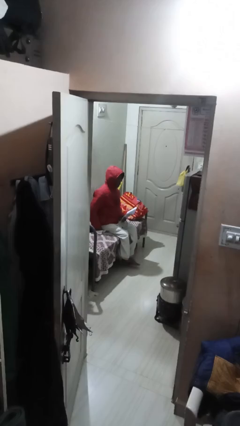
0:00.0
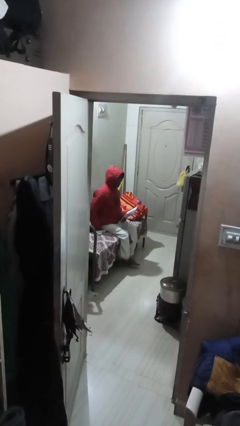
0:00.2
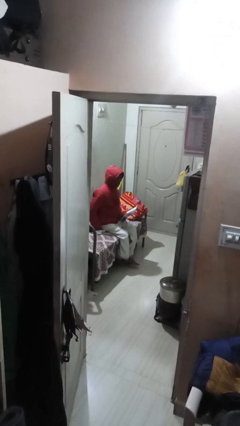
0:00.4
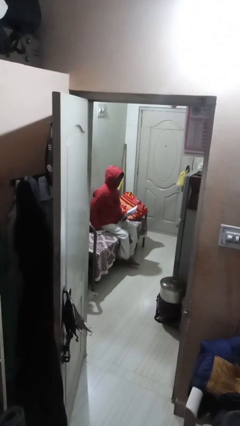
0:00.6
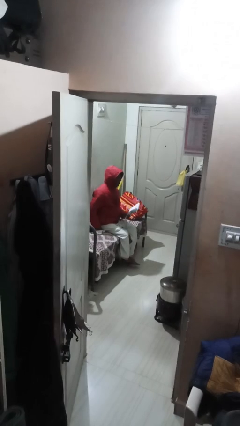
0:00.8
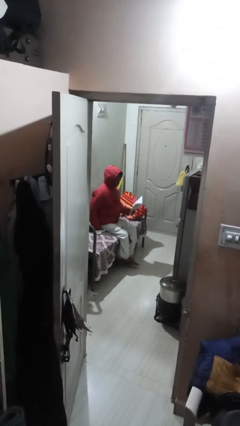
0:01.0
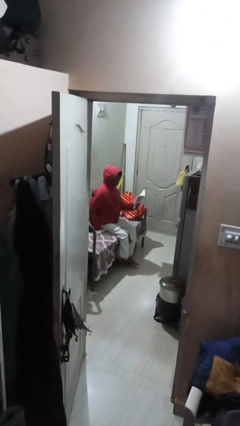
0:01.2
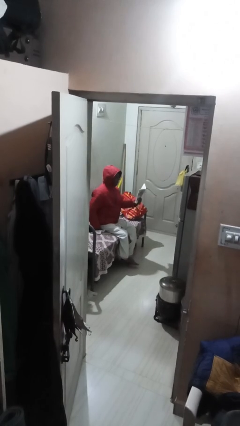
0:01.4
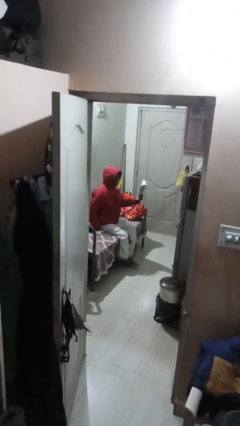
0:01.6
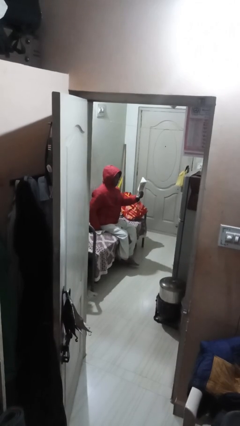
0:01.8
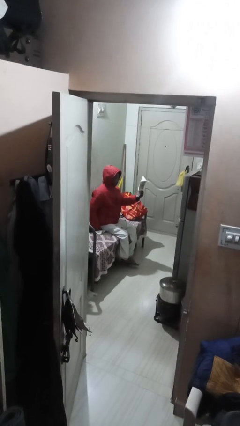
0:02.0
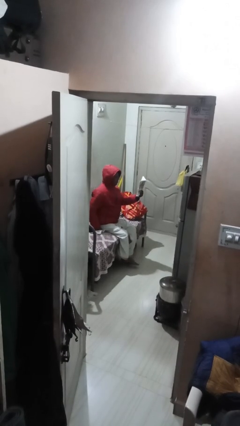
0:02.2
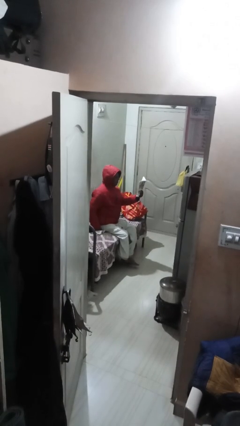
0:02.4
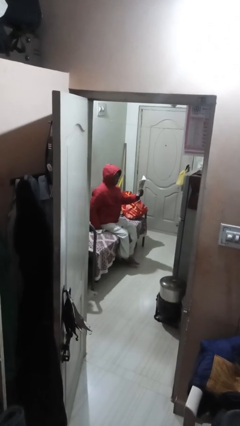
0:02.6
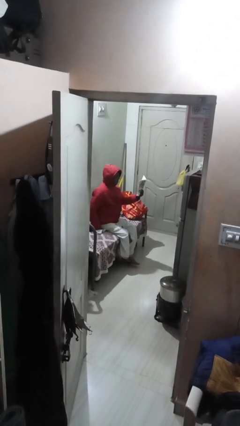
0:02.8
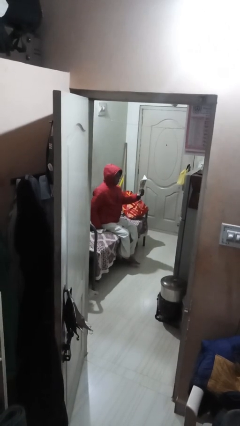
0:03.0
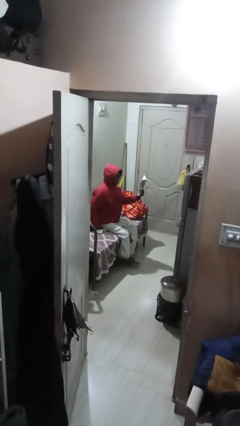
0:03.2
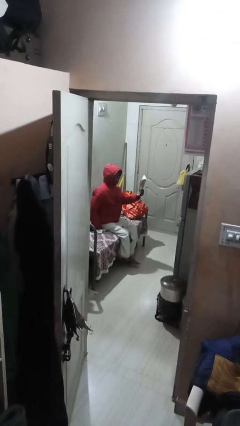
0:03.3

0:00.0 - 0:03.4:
person reads document

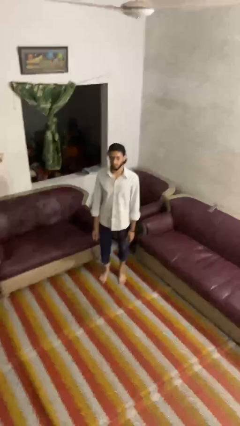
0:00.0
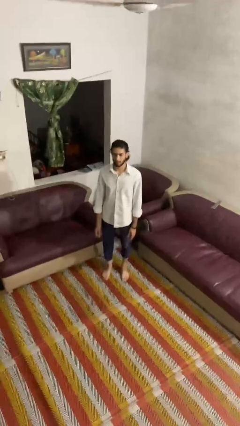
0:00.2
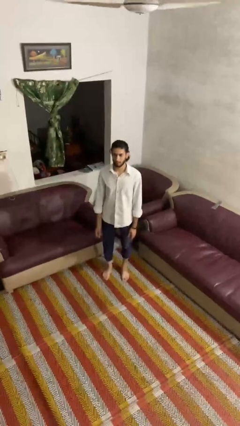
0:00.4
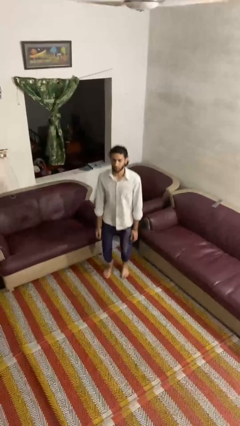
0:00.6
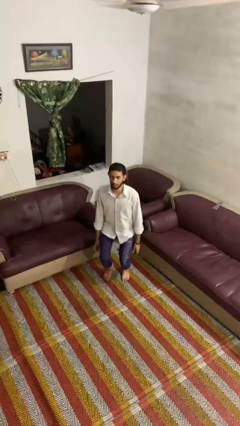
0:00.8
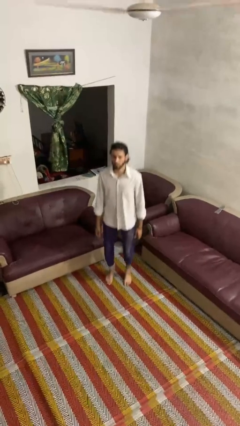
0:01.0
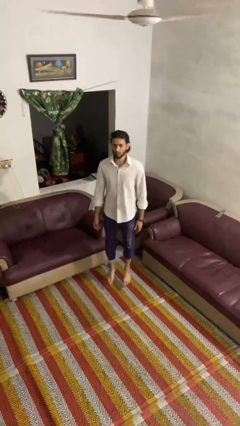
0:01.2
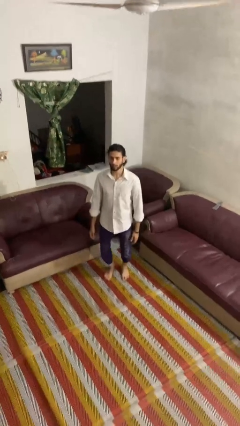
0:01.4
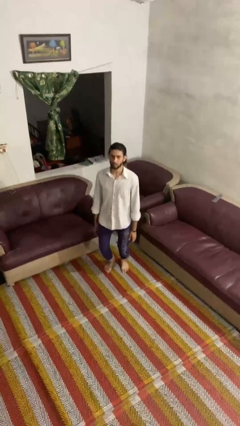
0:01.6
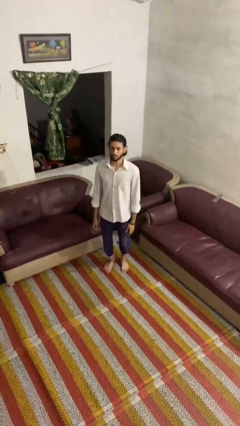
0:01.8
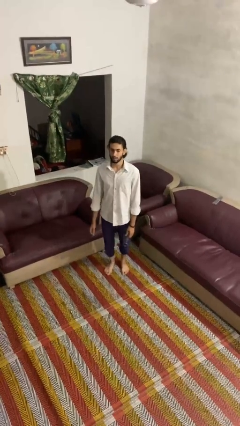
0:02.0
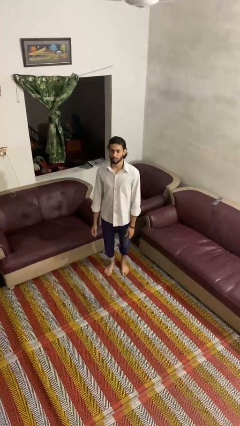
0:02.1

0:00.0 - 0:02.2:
person jumps

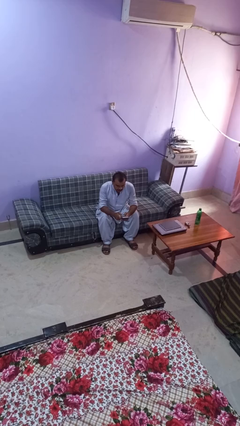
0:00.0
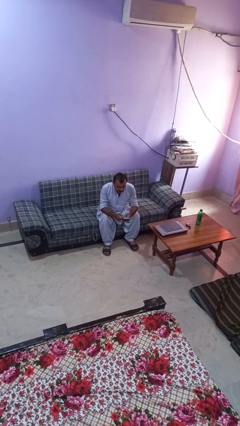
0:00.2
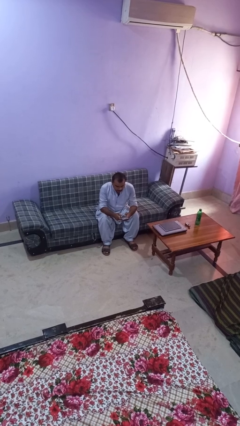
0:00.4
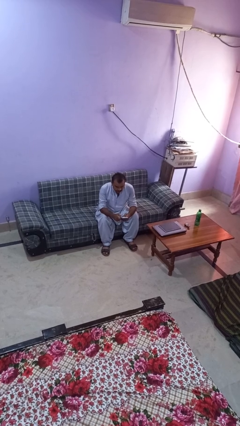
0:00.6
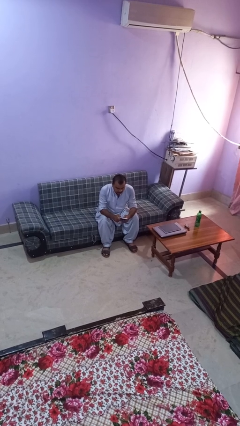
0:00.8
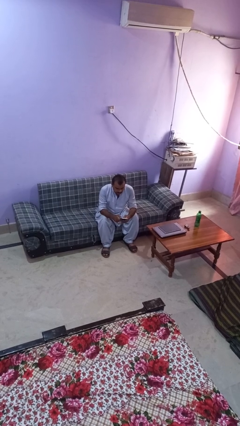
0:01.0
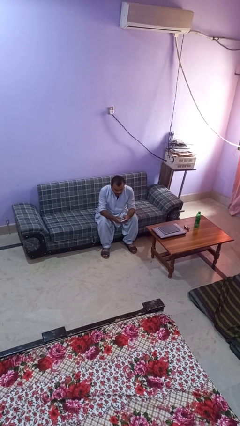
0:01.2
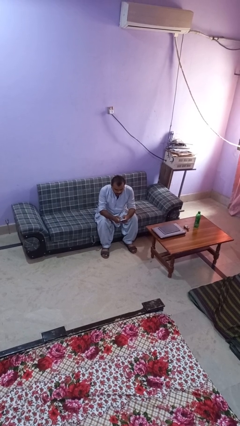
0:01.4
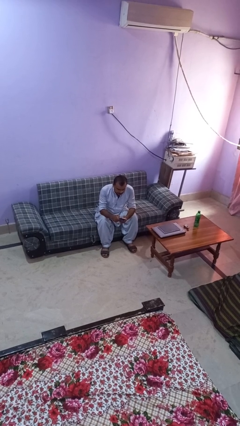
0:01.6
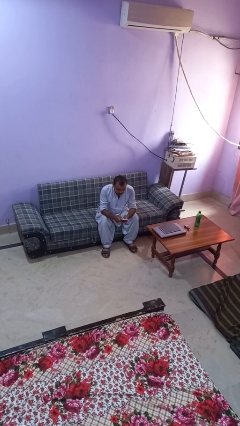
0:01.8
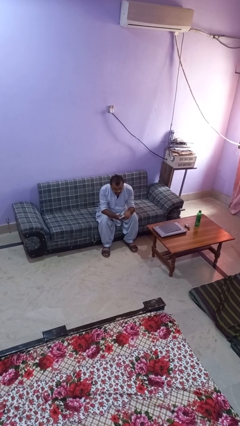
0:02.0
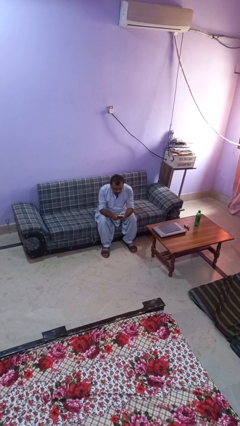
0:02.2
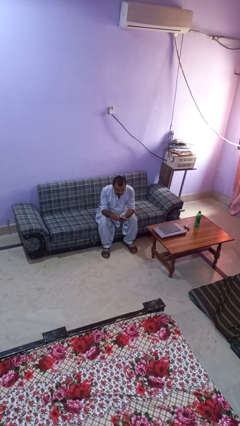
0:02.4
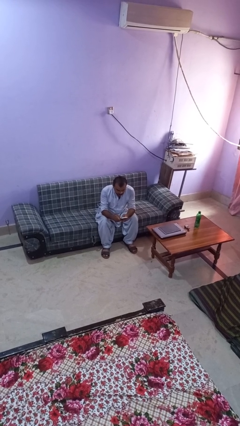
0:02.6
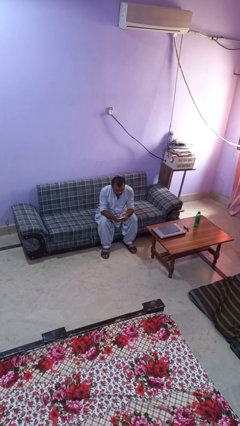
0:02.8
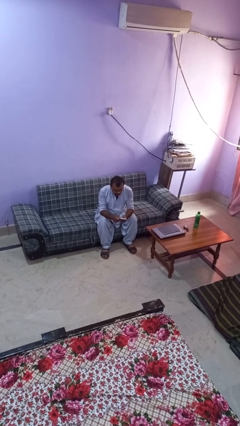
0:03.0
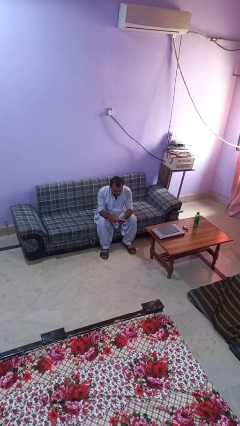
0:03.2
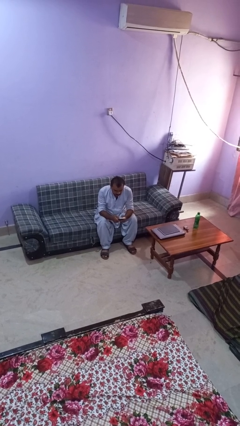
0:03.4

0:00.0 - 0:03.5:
person interacts with handheld game

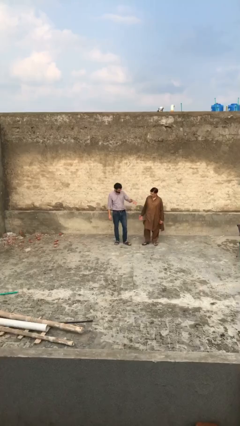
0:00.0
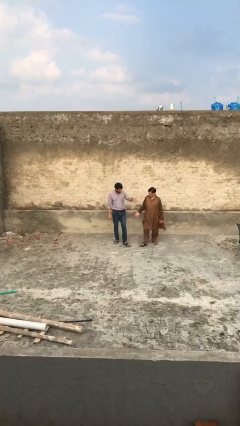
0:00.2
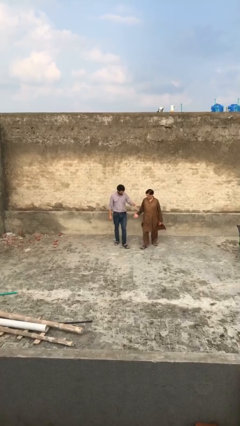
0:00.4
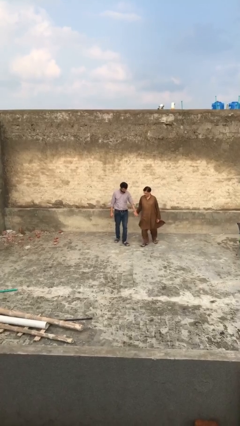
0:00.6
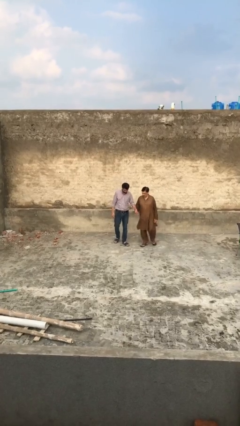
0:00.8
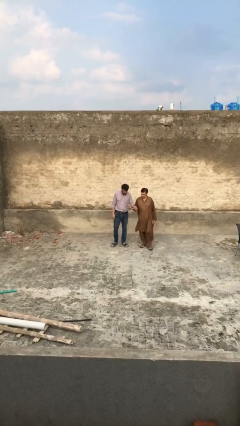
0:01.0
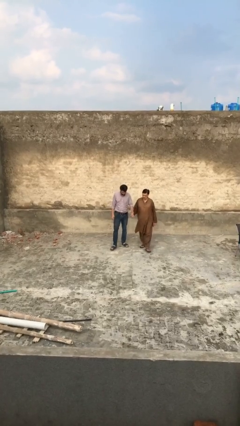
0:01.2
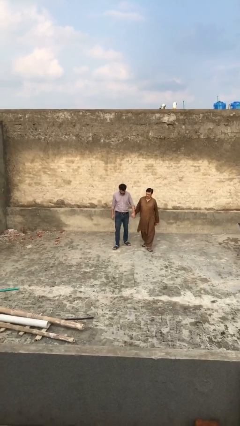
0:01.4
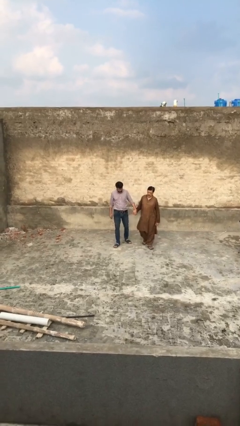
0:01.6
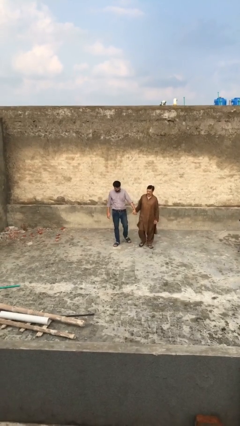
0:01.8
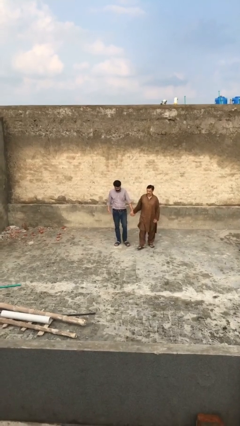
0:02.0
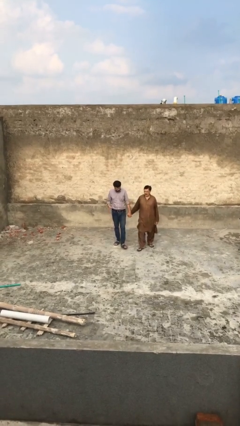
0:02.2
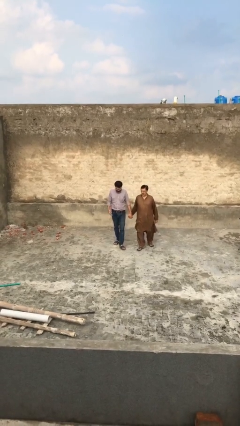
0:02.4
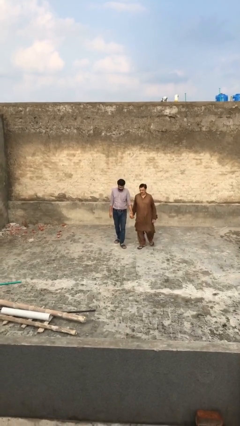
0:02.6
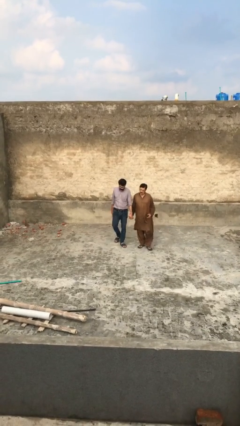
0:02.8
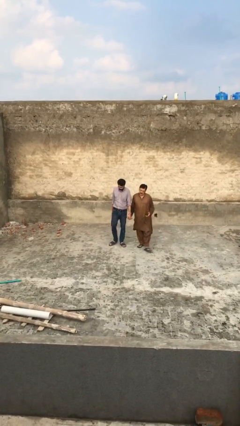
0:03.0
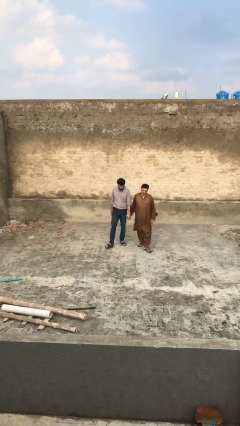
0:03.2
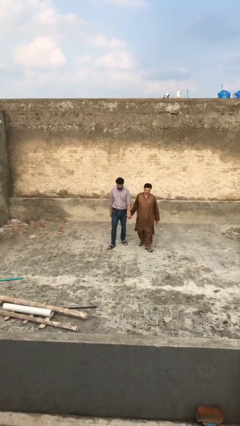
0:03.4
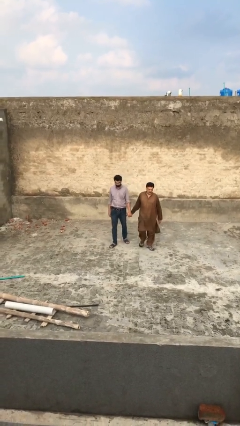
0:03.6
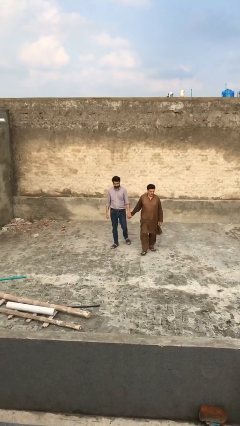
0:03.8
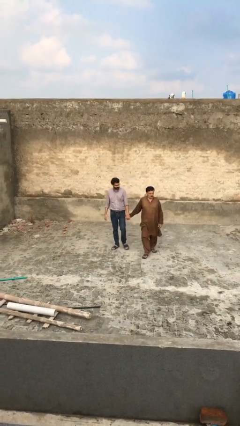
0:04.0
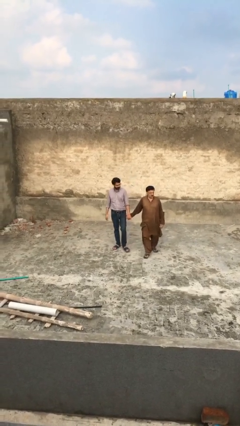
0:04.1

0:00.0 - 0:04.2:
person holds hand

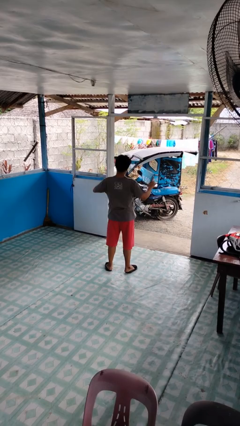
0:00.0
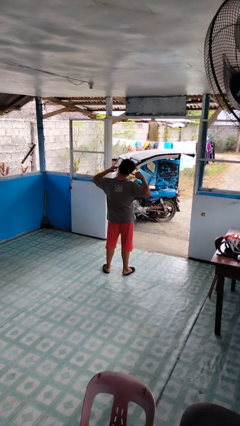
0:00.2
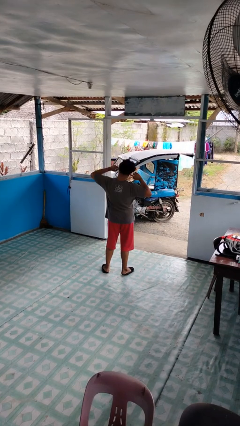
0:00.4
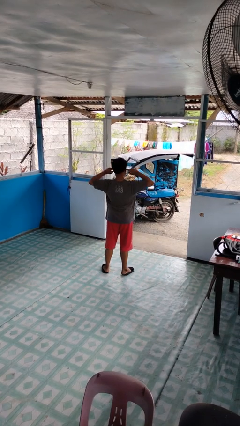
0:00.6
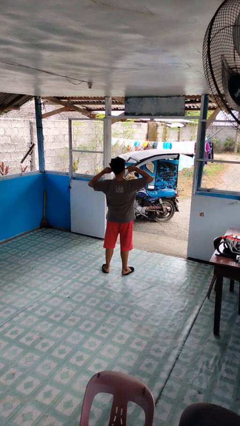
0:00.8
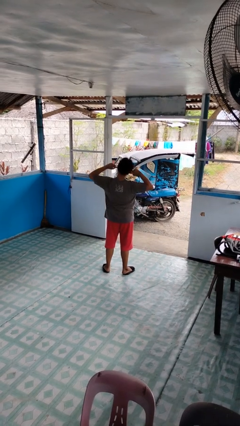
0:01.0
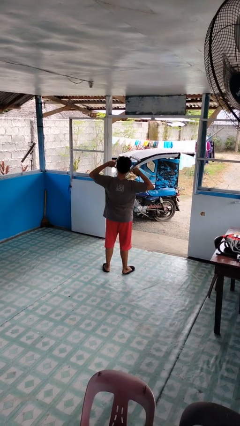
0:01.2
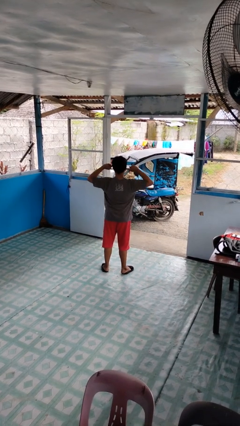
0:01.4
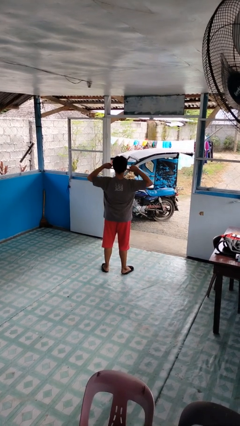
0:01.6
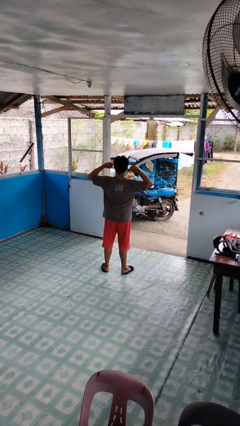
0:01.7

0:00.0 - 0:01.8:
person puts fingers in ear

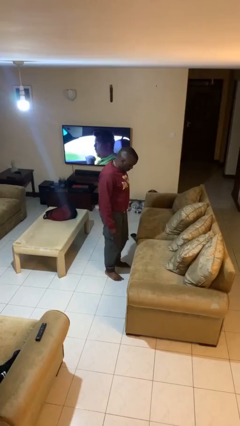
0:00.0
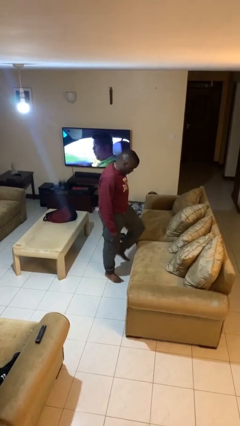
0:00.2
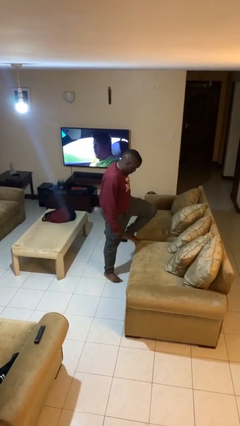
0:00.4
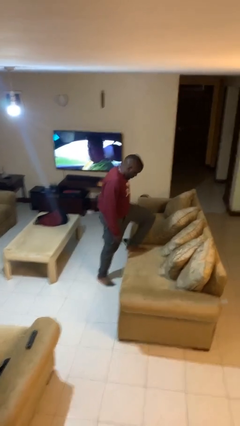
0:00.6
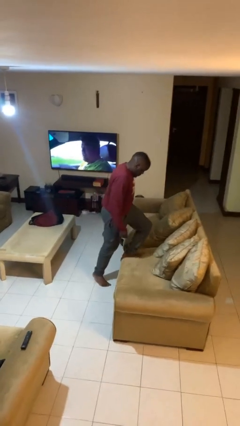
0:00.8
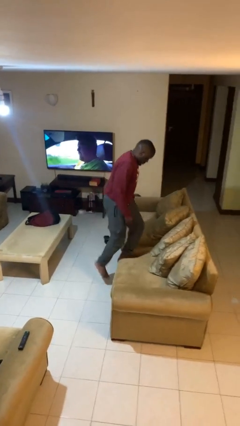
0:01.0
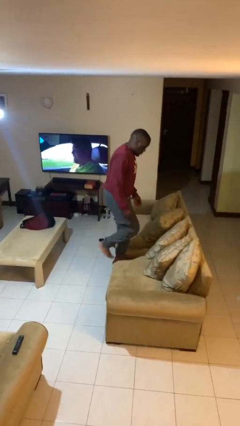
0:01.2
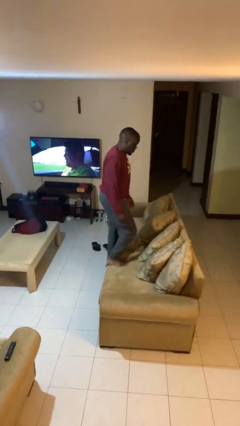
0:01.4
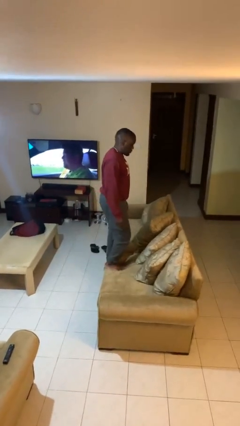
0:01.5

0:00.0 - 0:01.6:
person climbs off couch

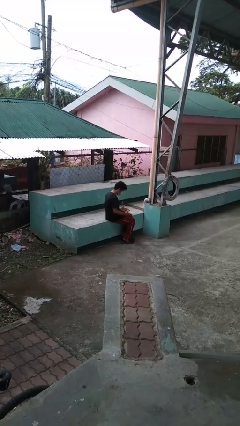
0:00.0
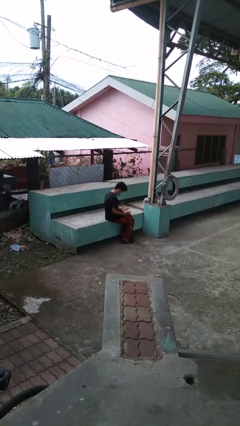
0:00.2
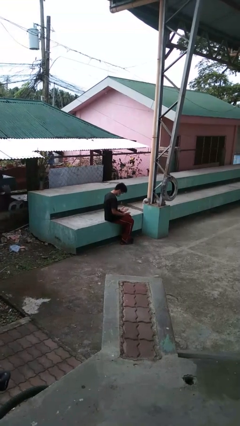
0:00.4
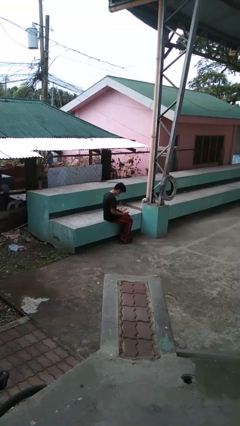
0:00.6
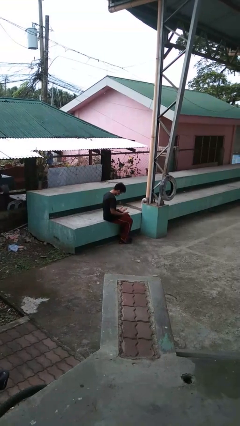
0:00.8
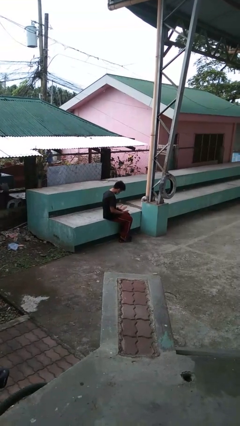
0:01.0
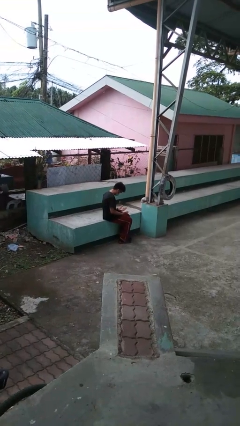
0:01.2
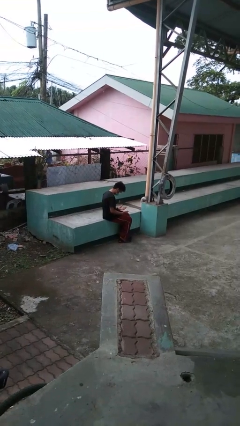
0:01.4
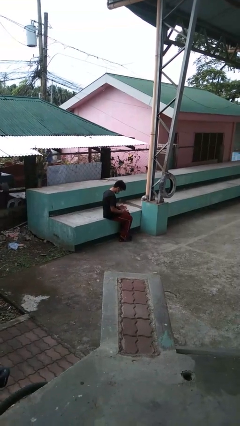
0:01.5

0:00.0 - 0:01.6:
person looks at hands in lap
